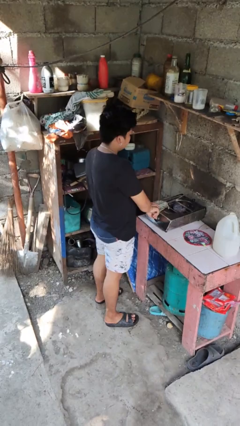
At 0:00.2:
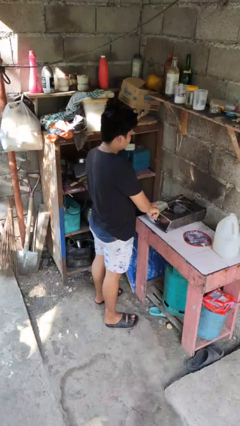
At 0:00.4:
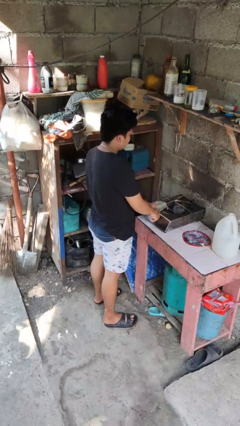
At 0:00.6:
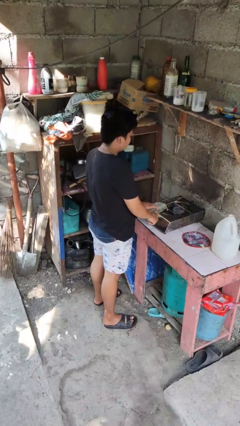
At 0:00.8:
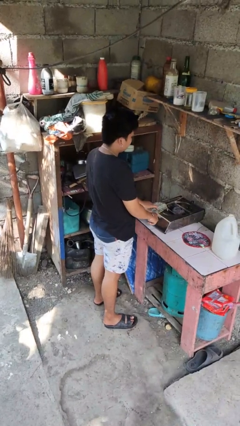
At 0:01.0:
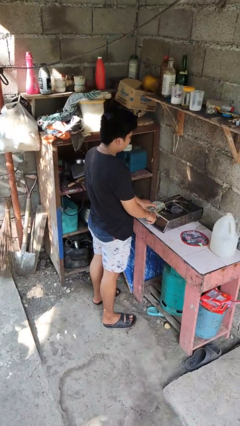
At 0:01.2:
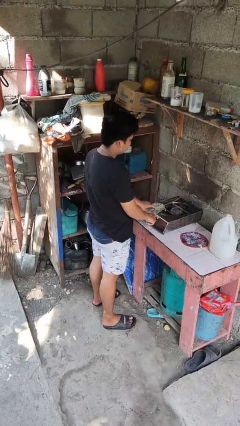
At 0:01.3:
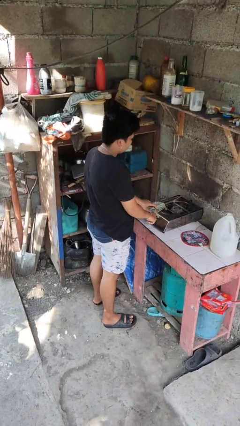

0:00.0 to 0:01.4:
person turns off stovetop

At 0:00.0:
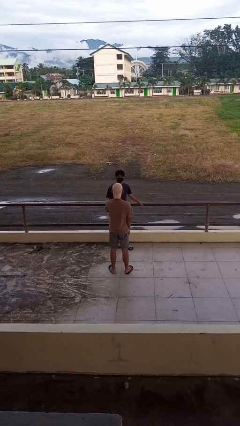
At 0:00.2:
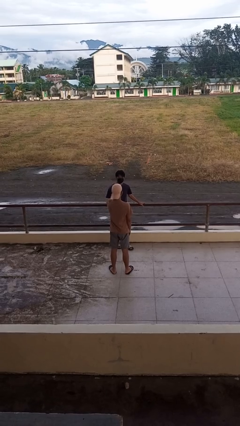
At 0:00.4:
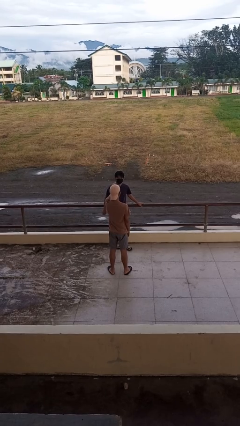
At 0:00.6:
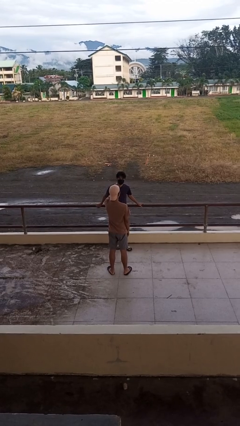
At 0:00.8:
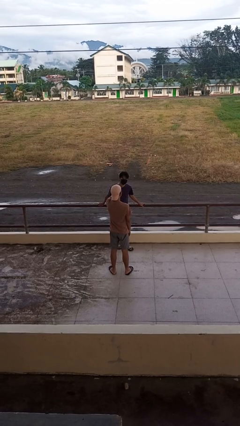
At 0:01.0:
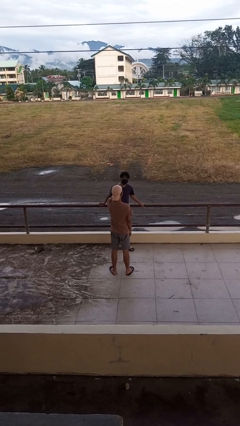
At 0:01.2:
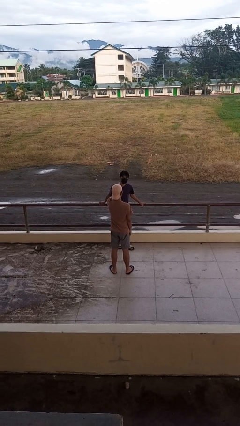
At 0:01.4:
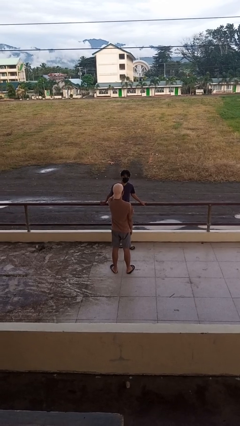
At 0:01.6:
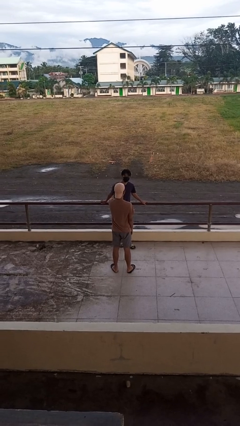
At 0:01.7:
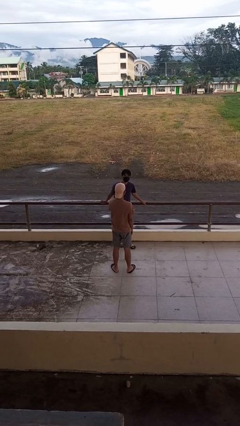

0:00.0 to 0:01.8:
person points at person

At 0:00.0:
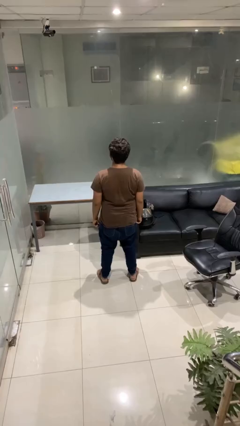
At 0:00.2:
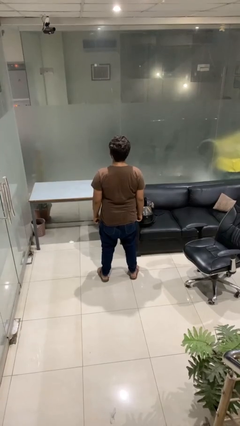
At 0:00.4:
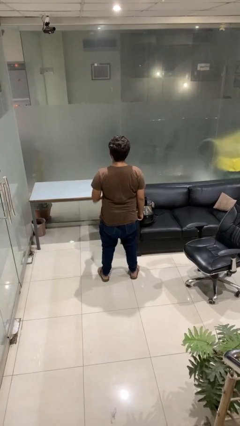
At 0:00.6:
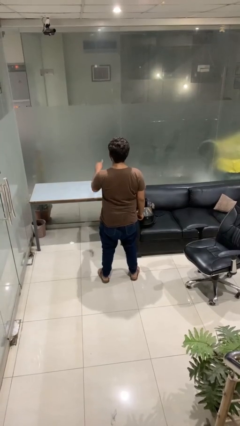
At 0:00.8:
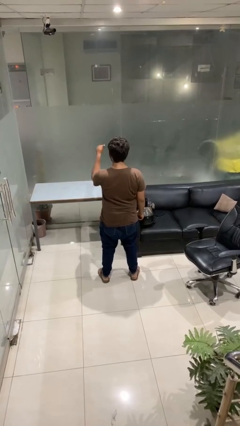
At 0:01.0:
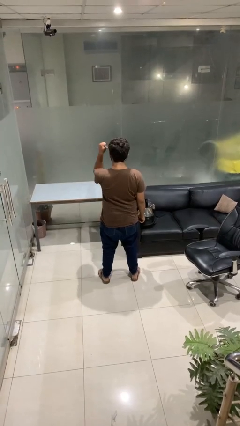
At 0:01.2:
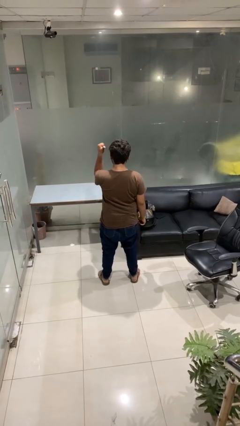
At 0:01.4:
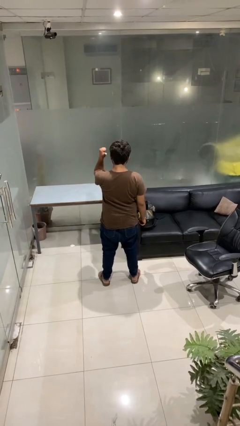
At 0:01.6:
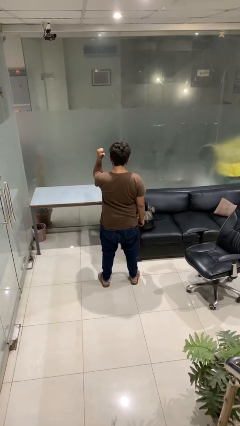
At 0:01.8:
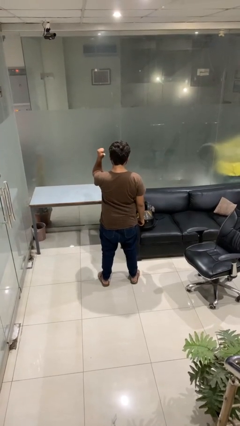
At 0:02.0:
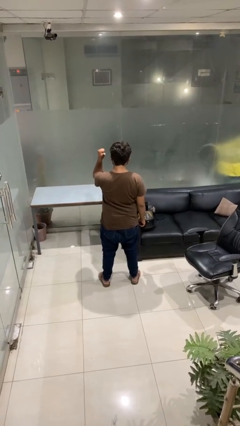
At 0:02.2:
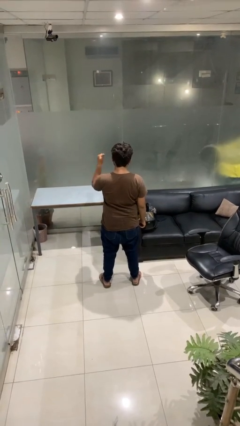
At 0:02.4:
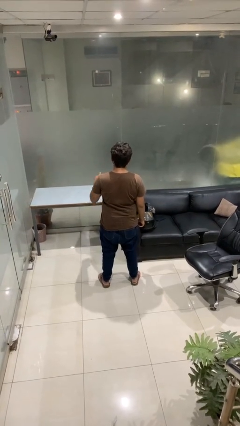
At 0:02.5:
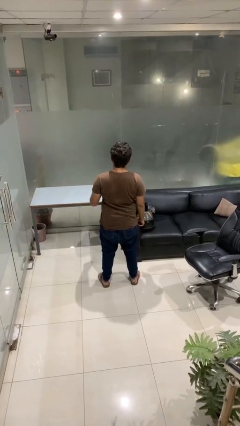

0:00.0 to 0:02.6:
person gestures behind me

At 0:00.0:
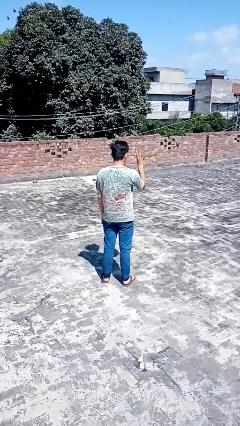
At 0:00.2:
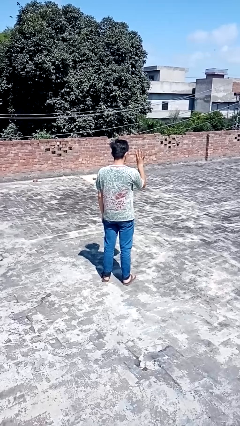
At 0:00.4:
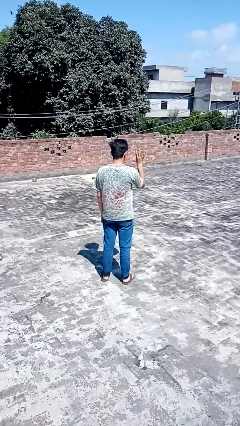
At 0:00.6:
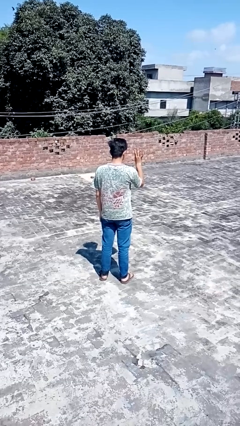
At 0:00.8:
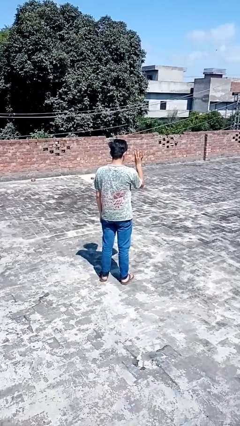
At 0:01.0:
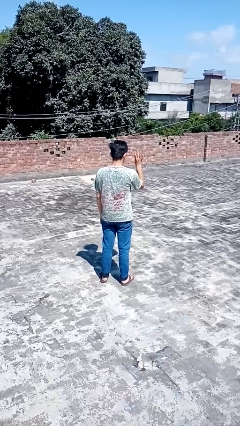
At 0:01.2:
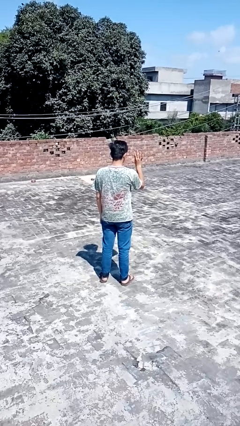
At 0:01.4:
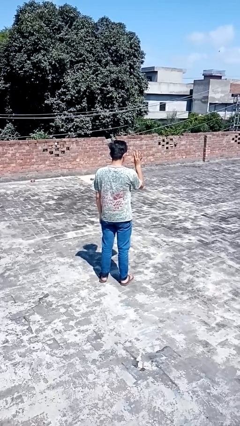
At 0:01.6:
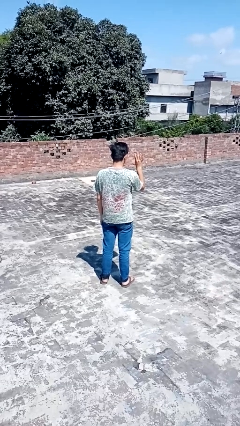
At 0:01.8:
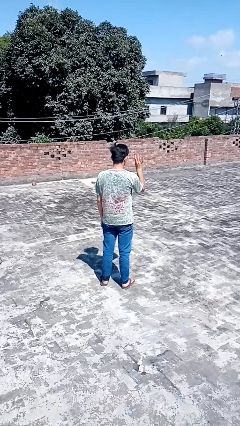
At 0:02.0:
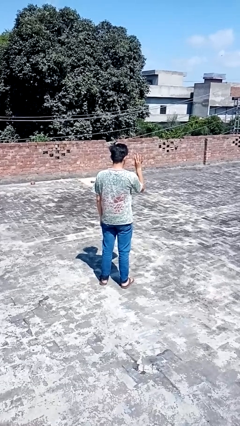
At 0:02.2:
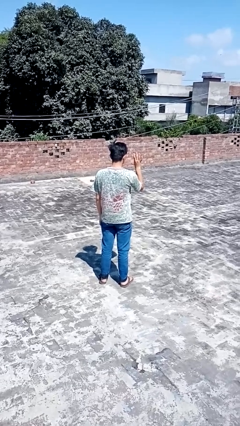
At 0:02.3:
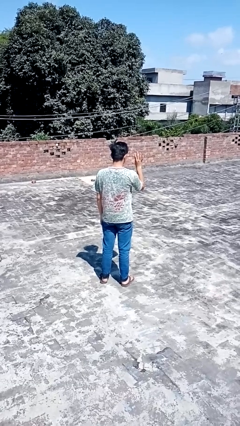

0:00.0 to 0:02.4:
person gestures number four

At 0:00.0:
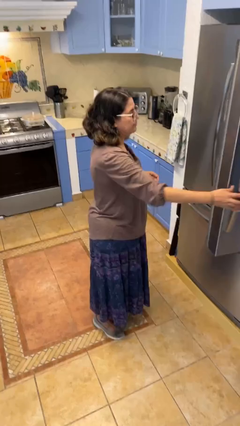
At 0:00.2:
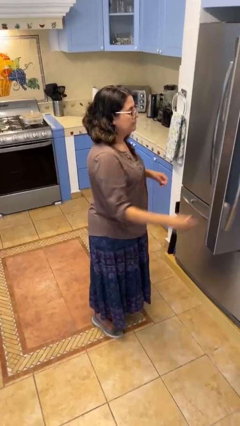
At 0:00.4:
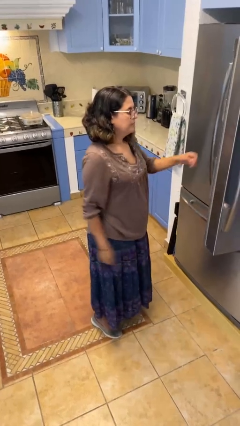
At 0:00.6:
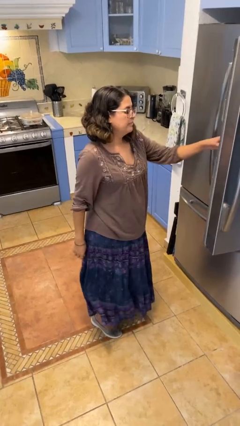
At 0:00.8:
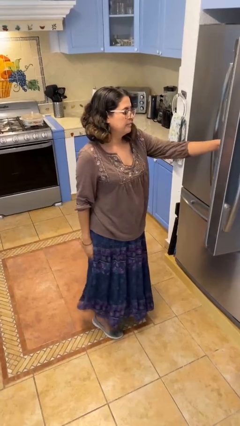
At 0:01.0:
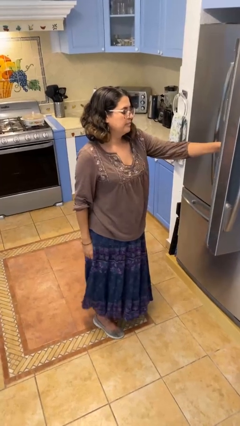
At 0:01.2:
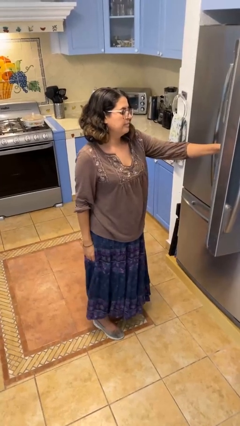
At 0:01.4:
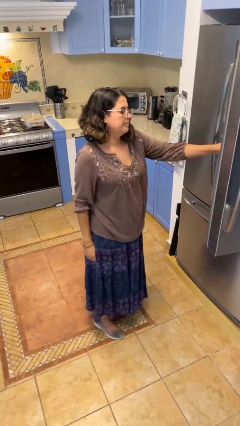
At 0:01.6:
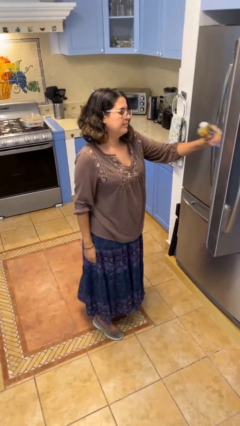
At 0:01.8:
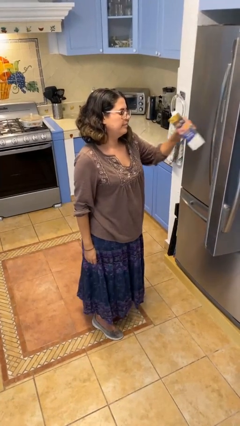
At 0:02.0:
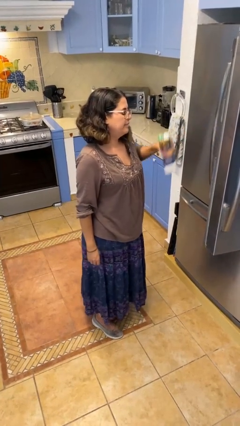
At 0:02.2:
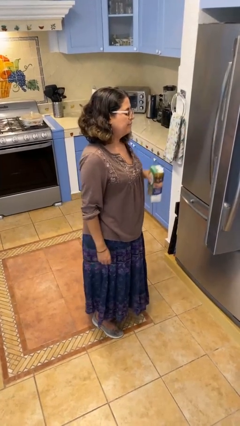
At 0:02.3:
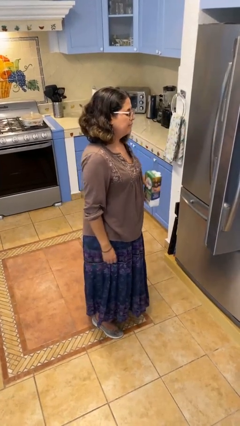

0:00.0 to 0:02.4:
person takes object from refrigerator

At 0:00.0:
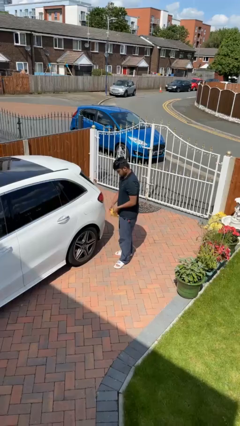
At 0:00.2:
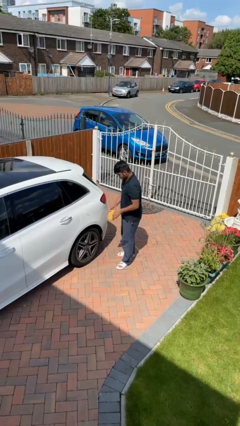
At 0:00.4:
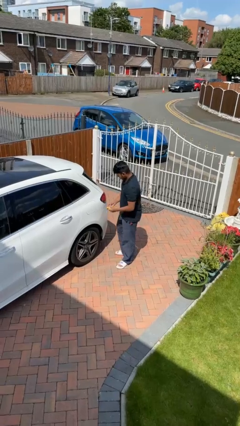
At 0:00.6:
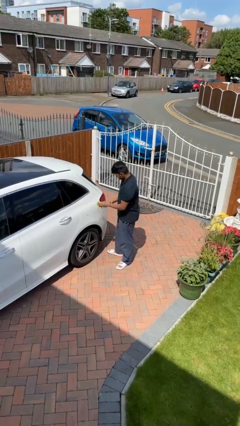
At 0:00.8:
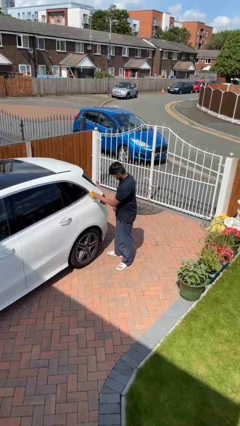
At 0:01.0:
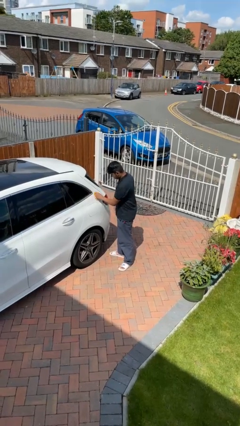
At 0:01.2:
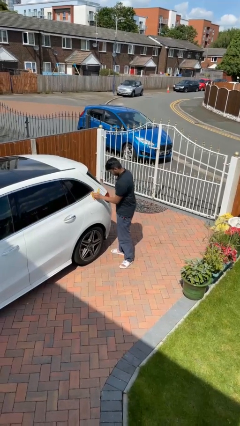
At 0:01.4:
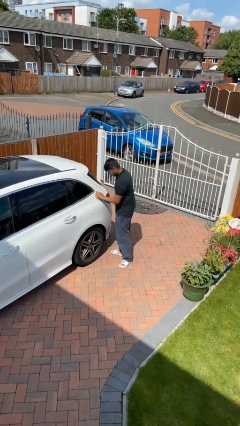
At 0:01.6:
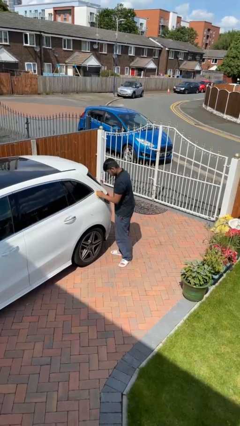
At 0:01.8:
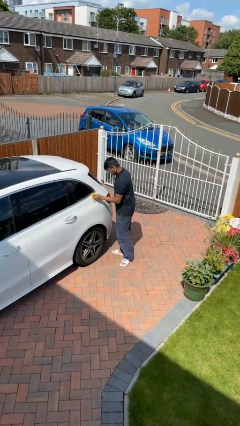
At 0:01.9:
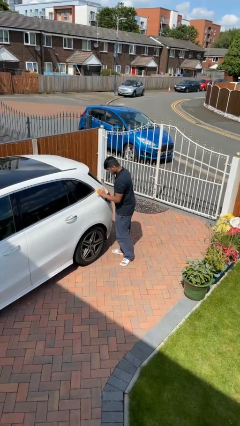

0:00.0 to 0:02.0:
person polishes car with rag

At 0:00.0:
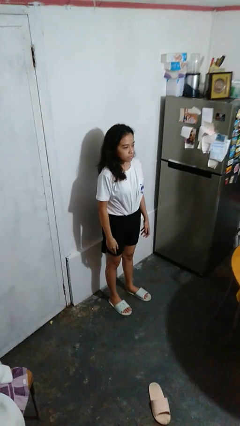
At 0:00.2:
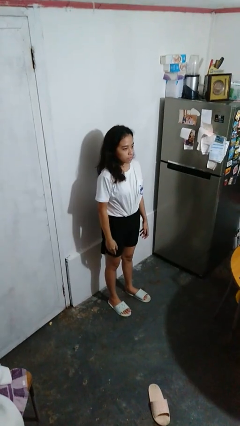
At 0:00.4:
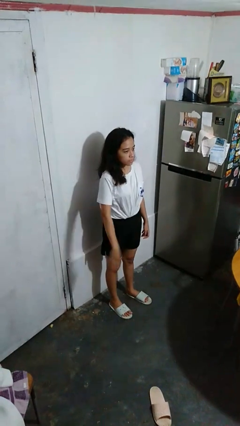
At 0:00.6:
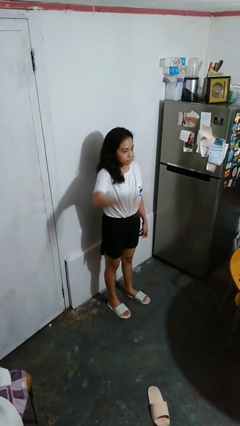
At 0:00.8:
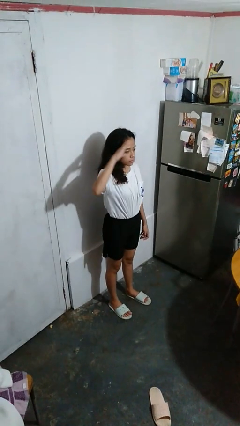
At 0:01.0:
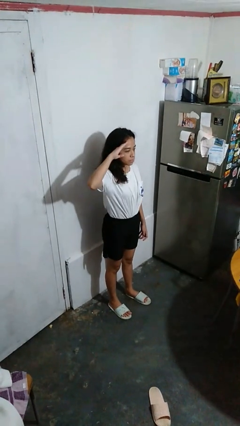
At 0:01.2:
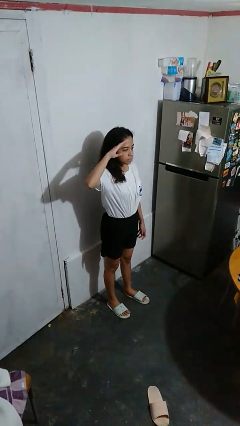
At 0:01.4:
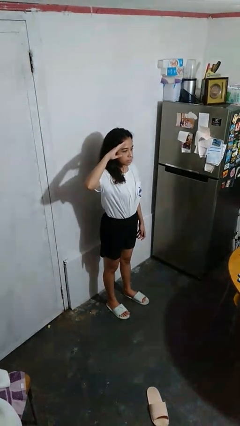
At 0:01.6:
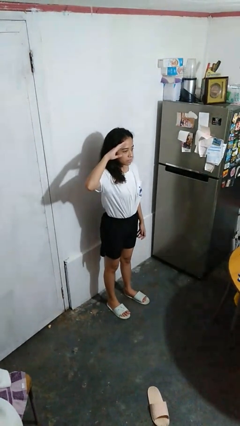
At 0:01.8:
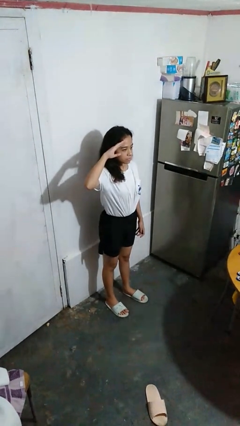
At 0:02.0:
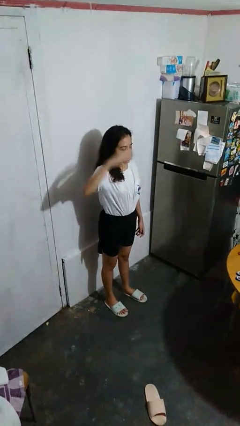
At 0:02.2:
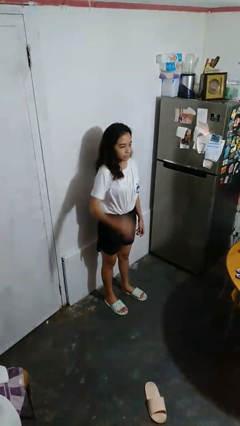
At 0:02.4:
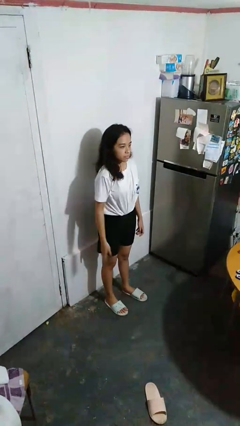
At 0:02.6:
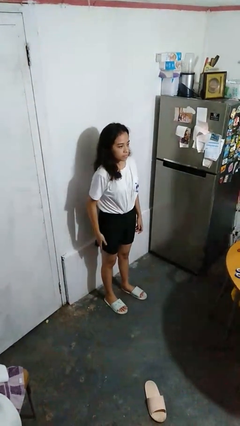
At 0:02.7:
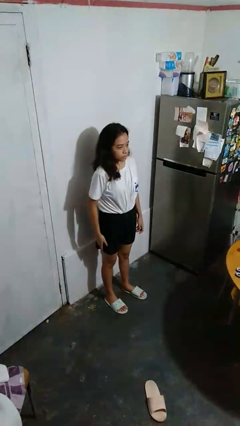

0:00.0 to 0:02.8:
person salutes

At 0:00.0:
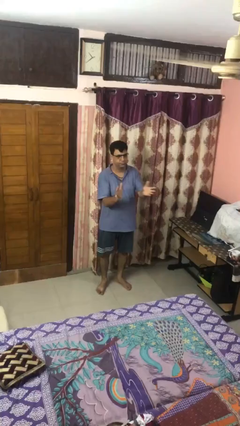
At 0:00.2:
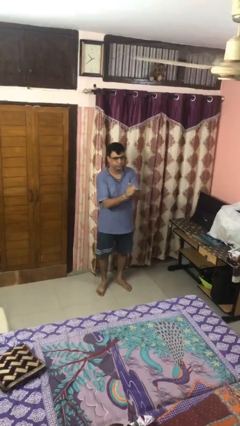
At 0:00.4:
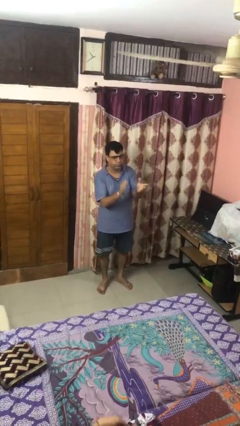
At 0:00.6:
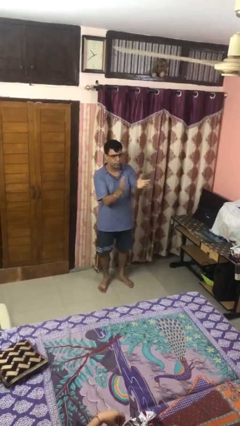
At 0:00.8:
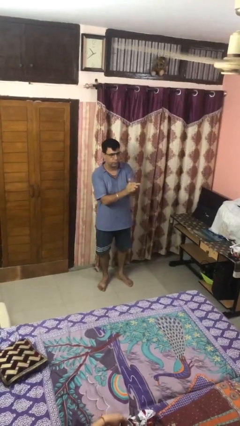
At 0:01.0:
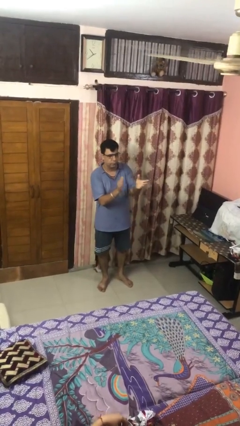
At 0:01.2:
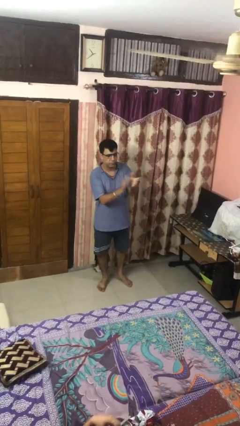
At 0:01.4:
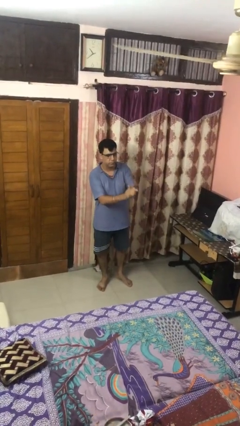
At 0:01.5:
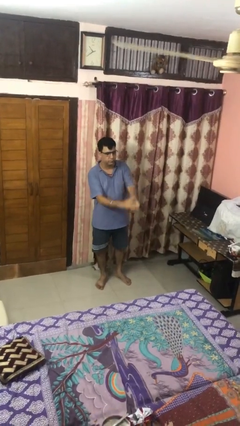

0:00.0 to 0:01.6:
person claps hands
